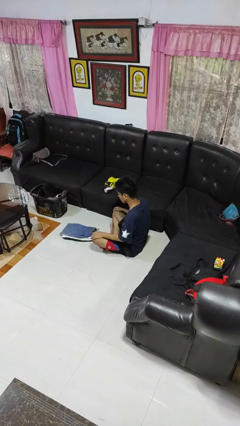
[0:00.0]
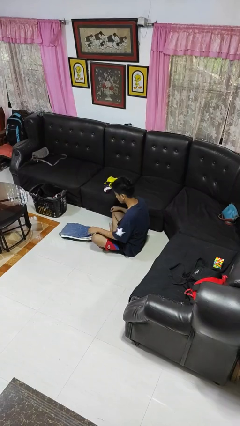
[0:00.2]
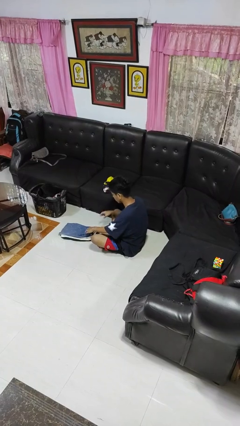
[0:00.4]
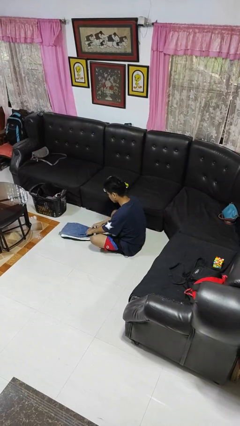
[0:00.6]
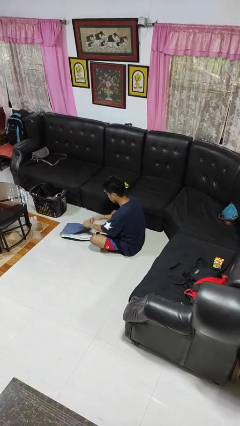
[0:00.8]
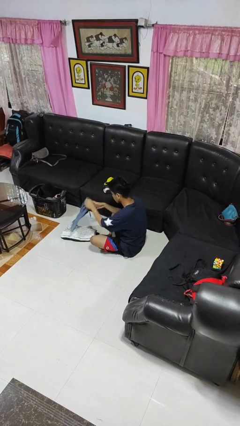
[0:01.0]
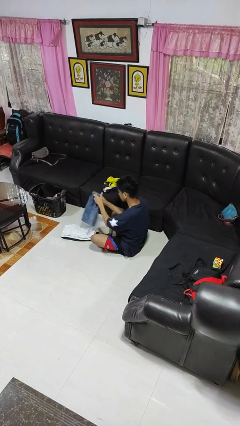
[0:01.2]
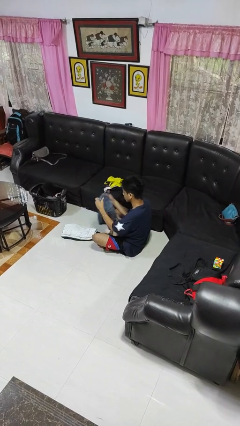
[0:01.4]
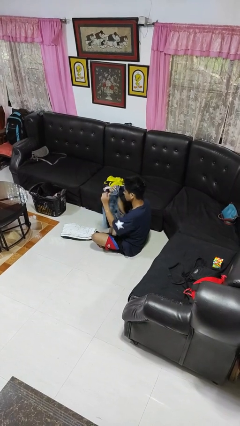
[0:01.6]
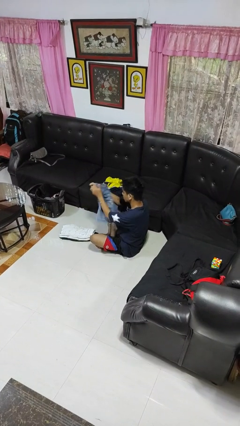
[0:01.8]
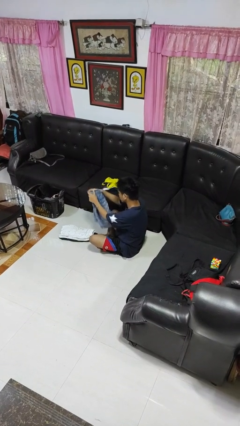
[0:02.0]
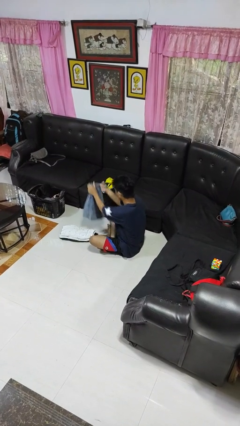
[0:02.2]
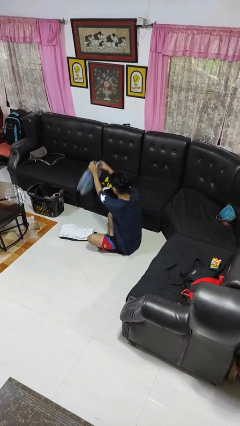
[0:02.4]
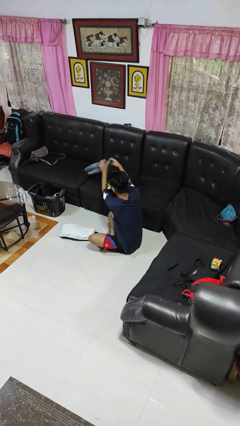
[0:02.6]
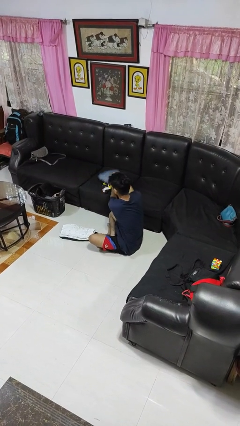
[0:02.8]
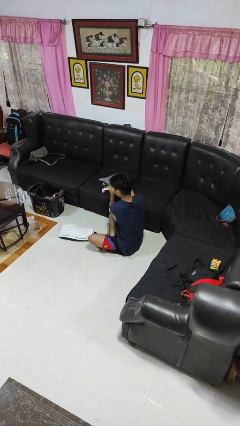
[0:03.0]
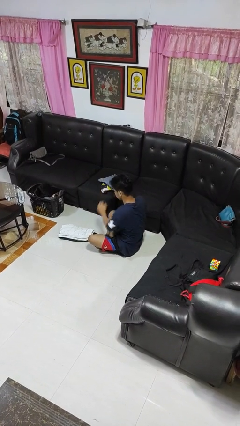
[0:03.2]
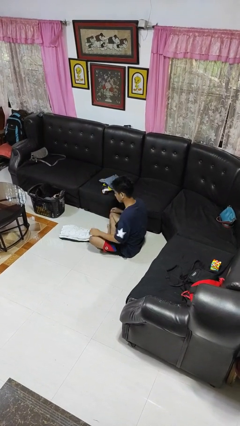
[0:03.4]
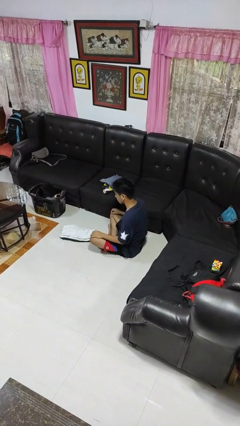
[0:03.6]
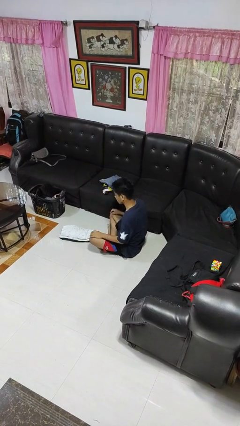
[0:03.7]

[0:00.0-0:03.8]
person folds pants

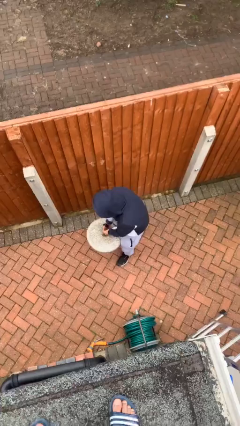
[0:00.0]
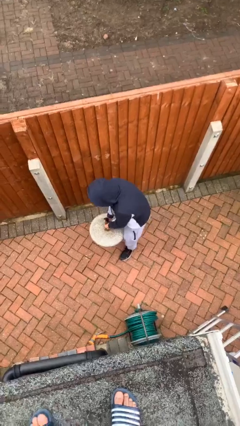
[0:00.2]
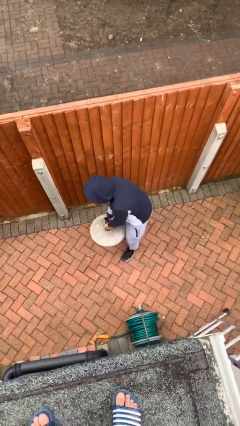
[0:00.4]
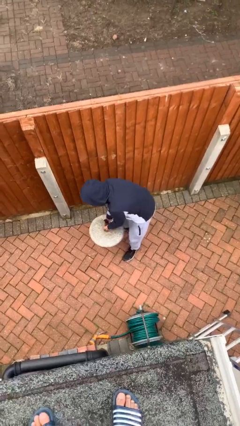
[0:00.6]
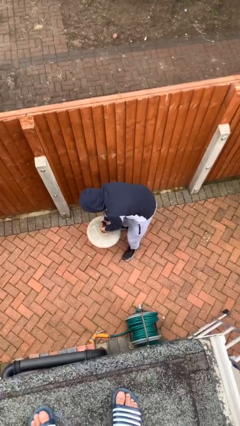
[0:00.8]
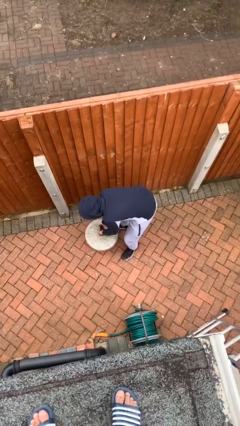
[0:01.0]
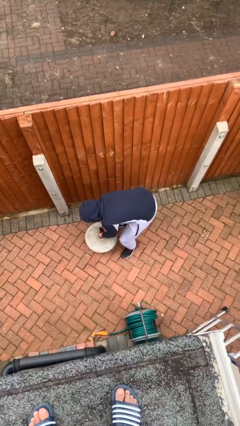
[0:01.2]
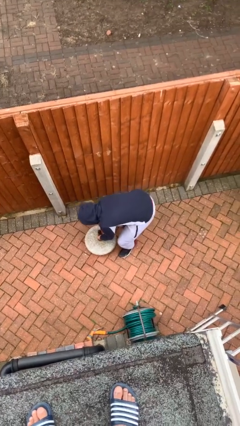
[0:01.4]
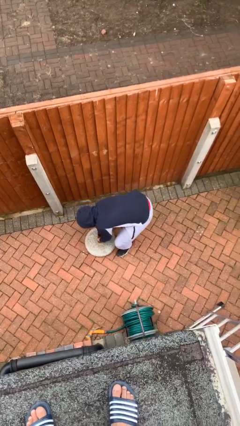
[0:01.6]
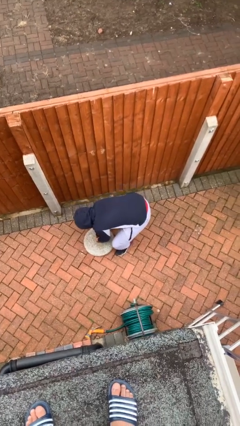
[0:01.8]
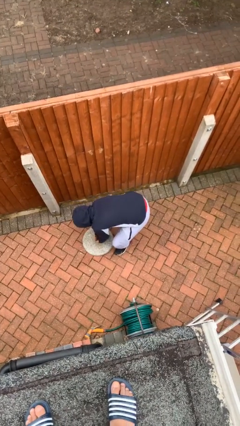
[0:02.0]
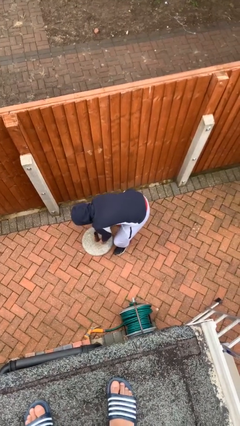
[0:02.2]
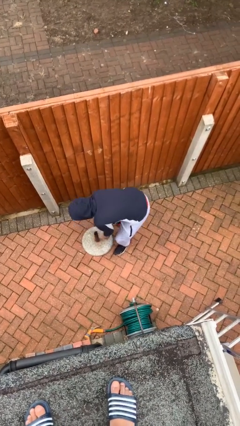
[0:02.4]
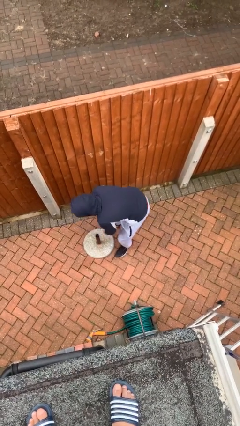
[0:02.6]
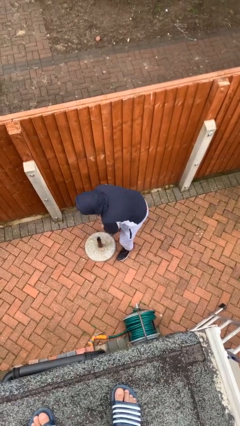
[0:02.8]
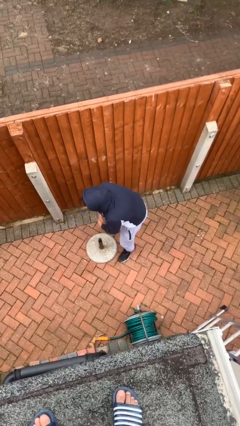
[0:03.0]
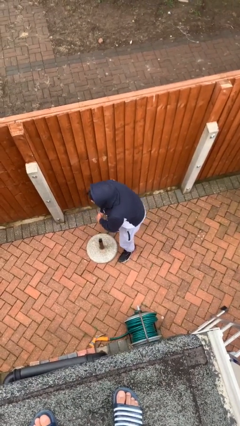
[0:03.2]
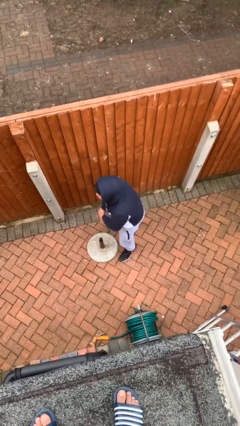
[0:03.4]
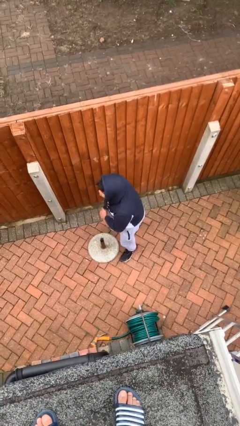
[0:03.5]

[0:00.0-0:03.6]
person puts down object on floor

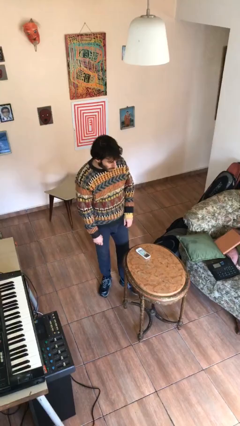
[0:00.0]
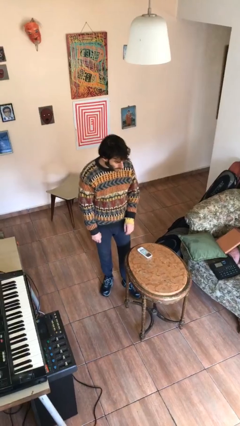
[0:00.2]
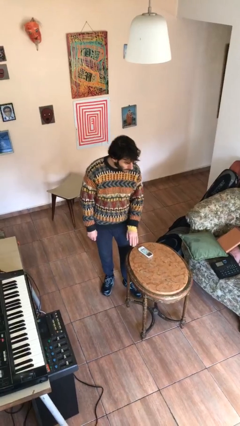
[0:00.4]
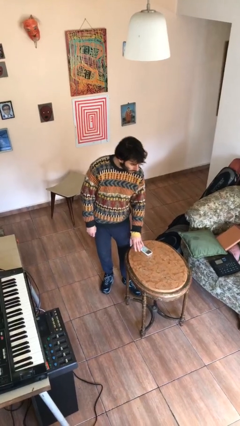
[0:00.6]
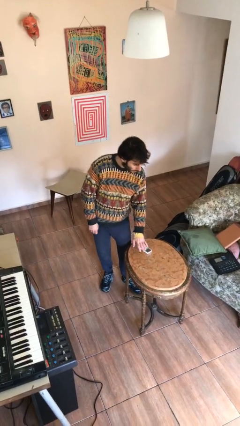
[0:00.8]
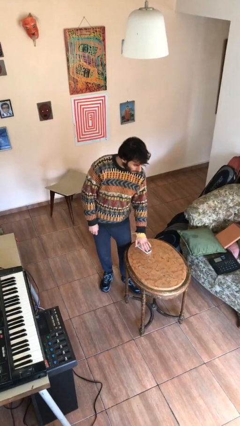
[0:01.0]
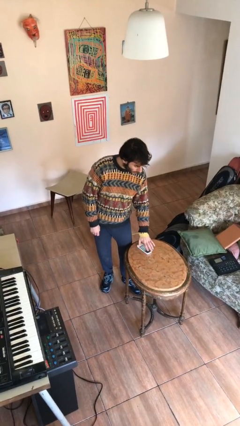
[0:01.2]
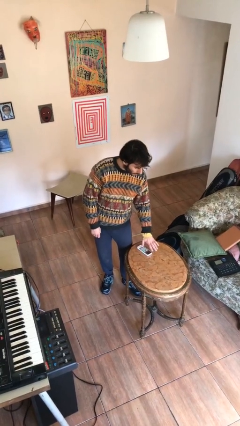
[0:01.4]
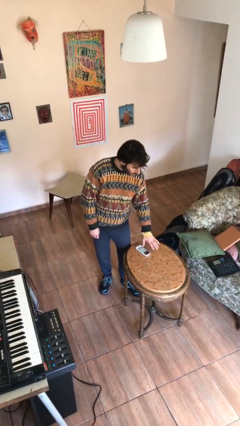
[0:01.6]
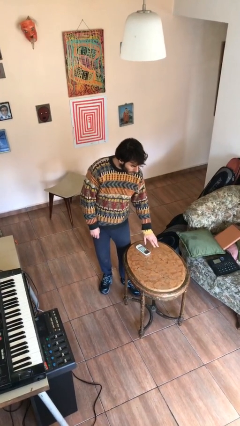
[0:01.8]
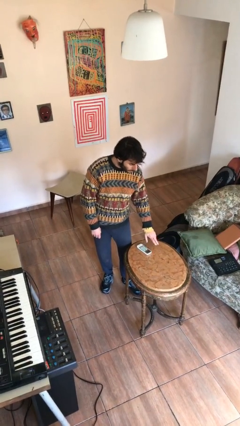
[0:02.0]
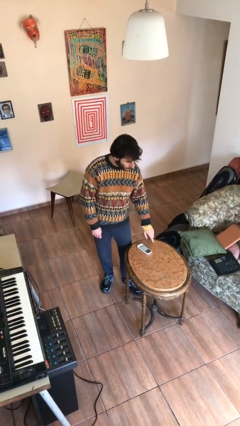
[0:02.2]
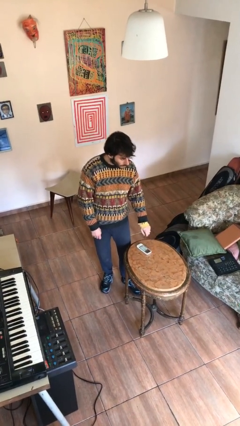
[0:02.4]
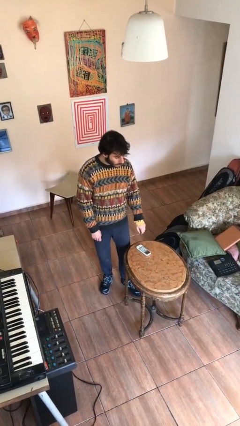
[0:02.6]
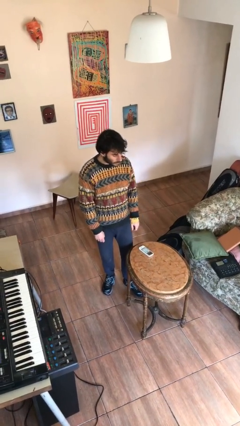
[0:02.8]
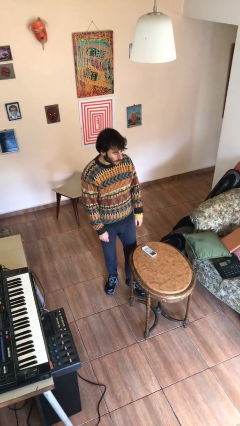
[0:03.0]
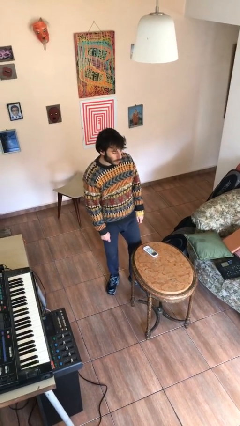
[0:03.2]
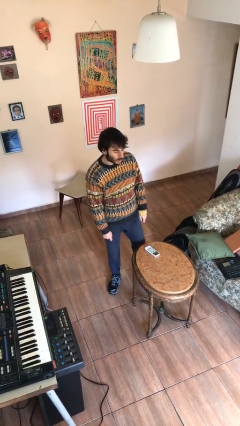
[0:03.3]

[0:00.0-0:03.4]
person waves hand over object

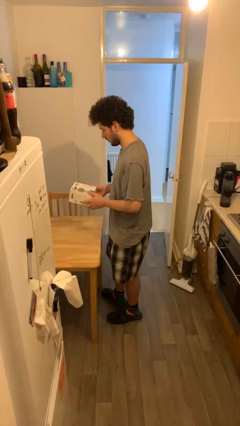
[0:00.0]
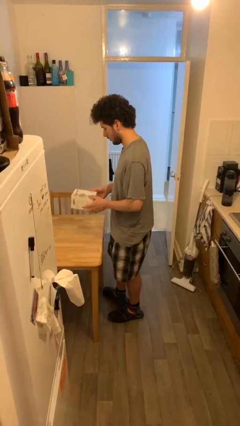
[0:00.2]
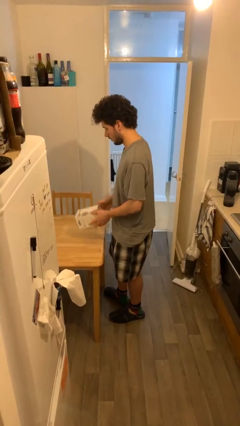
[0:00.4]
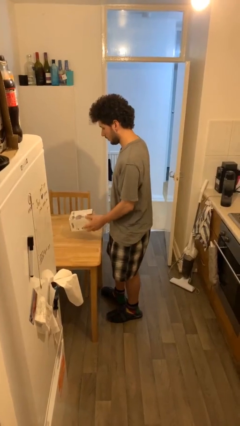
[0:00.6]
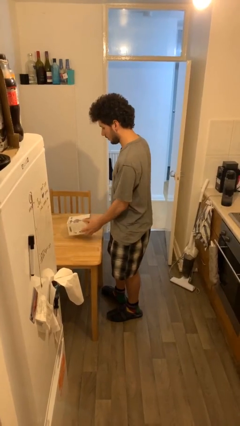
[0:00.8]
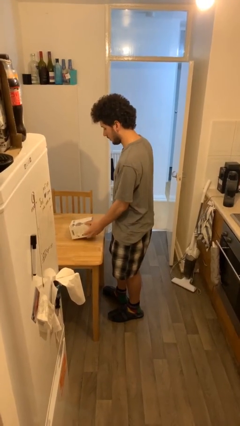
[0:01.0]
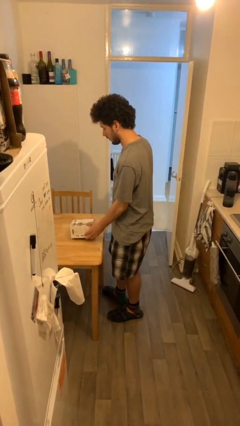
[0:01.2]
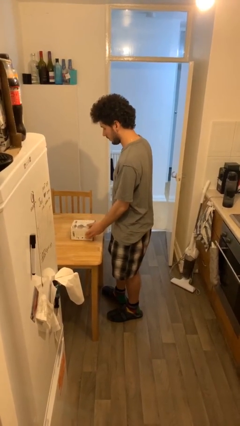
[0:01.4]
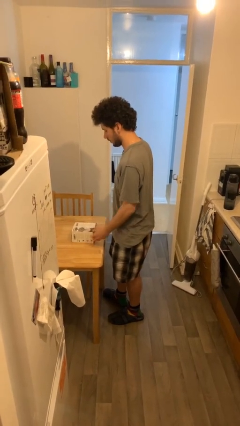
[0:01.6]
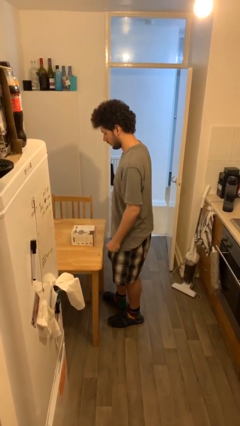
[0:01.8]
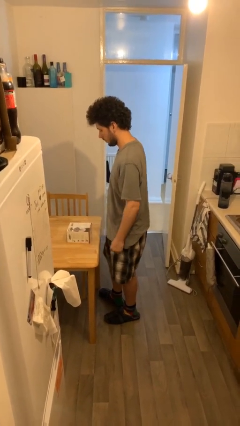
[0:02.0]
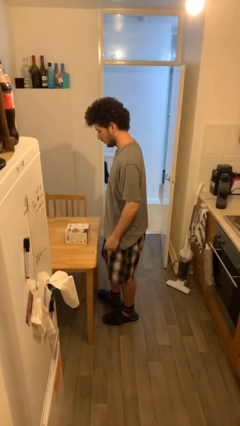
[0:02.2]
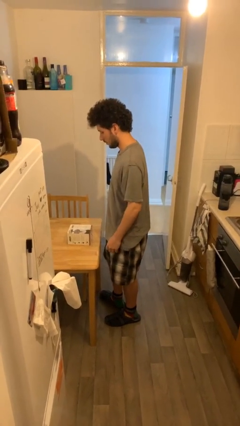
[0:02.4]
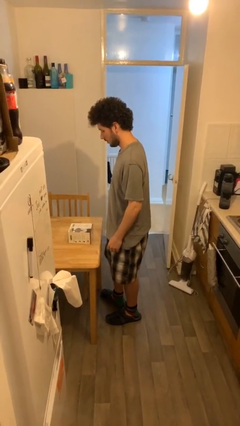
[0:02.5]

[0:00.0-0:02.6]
person puts down object on table

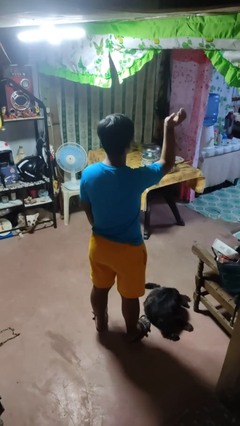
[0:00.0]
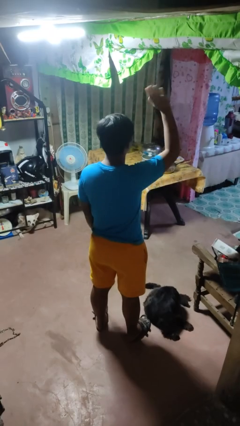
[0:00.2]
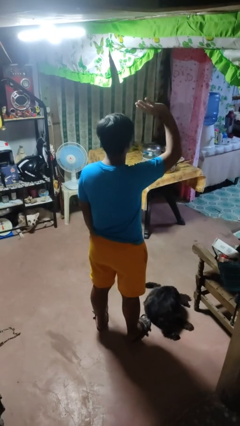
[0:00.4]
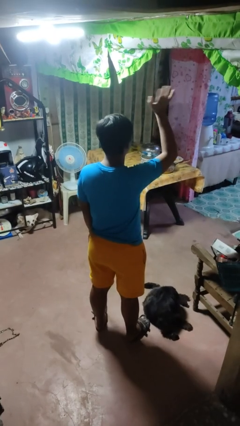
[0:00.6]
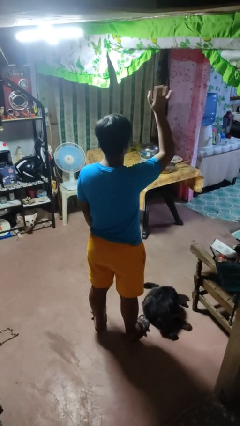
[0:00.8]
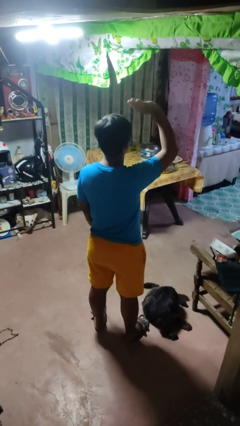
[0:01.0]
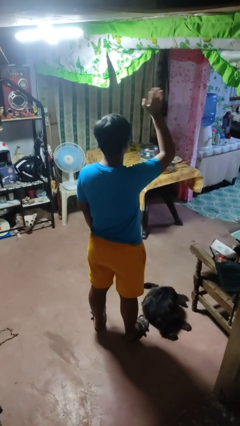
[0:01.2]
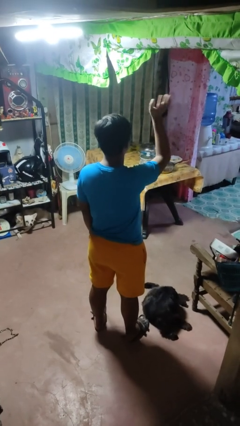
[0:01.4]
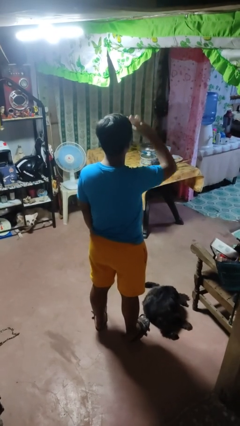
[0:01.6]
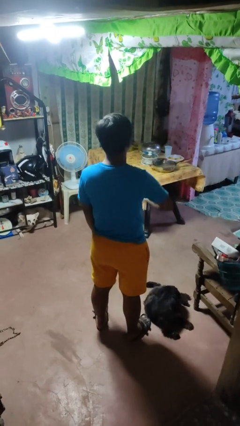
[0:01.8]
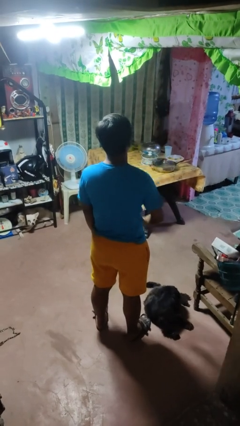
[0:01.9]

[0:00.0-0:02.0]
person waves at person

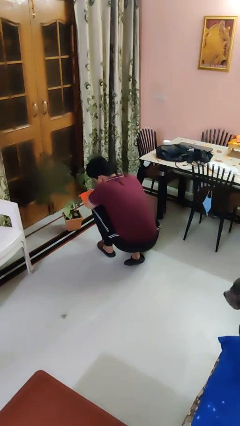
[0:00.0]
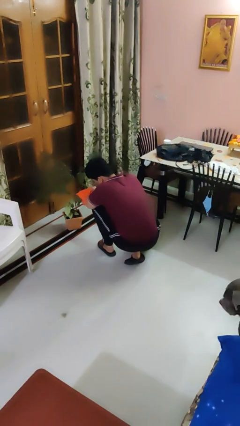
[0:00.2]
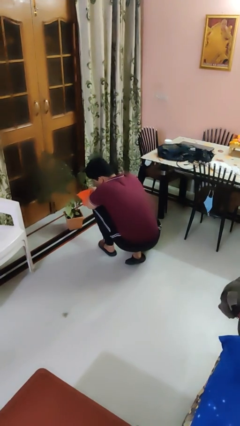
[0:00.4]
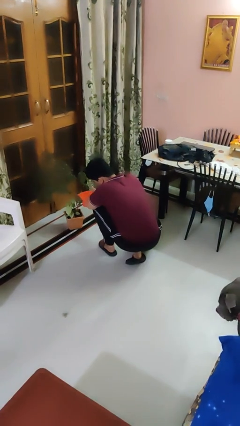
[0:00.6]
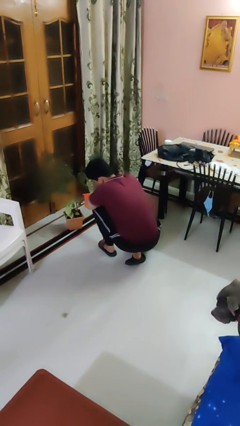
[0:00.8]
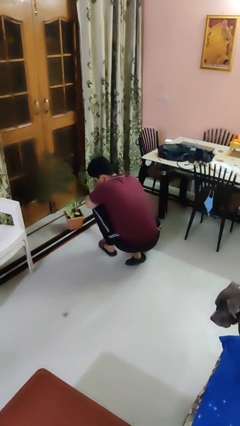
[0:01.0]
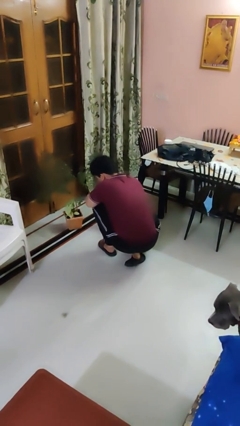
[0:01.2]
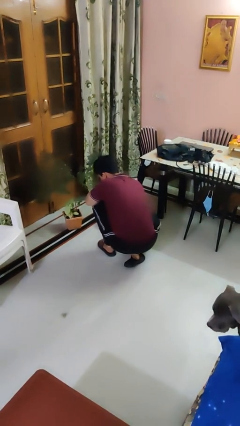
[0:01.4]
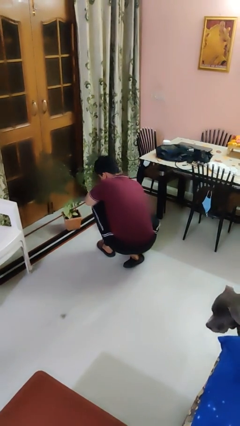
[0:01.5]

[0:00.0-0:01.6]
person waters houseplant

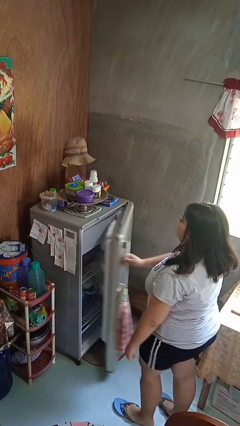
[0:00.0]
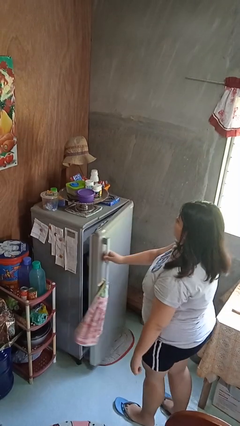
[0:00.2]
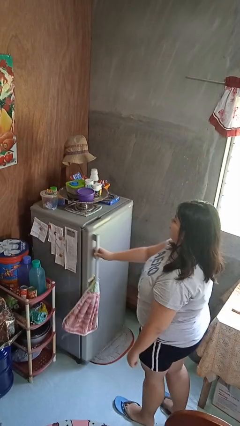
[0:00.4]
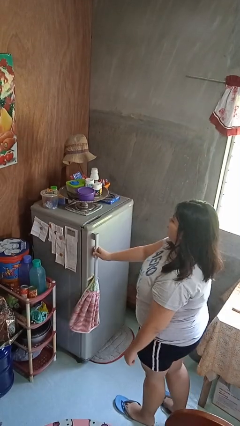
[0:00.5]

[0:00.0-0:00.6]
person closes refrigerator
